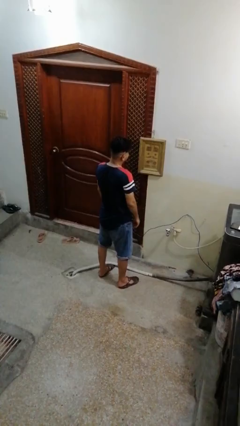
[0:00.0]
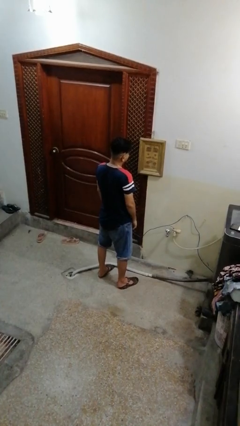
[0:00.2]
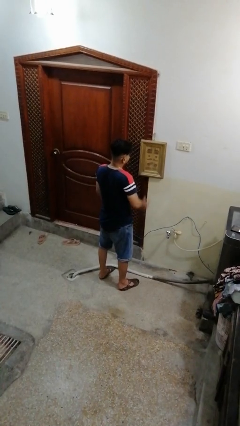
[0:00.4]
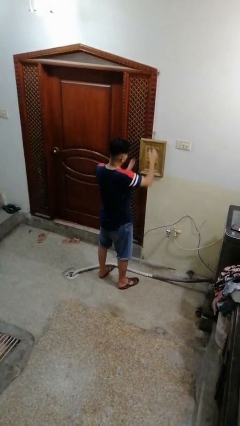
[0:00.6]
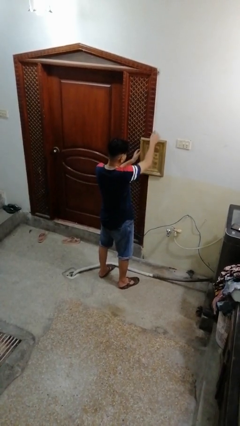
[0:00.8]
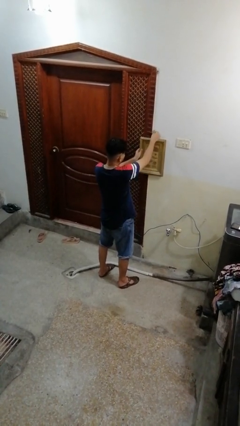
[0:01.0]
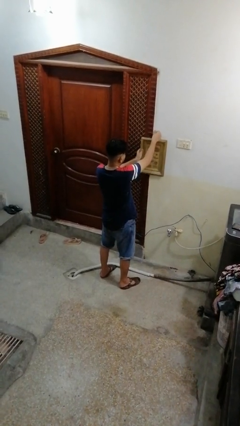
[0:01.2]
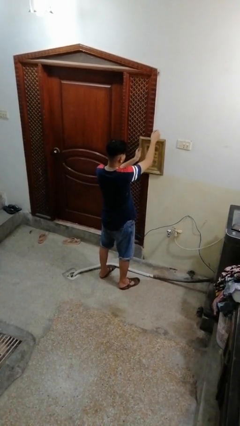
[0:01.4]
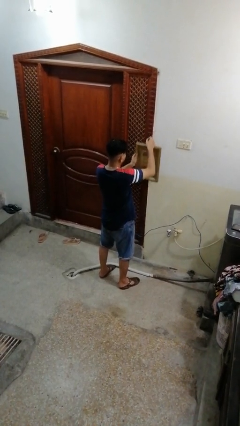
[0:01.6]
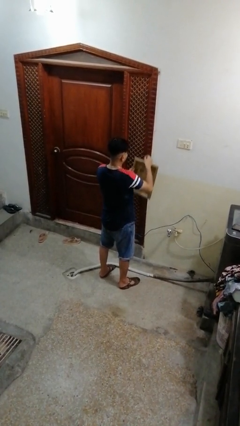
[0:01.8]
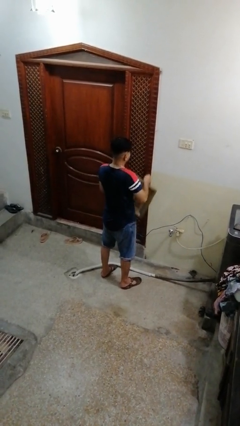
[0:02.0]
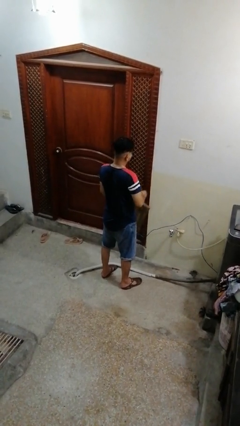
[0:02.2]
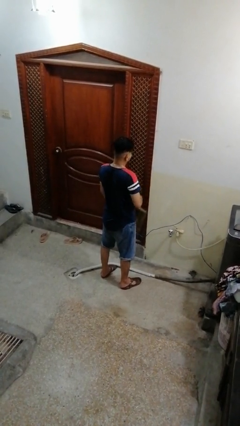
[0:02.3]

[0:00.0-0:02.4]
person takes down picture frame

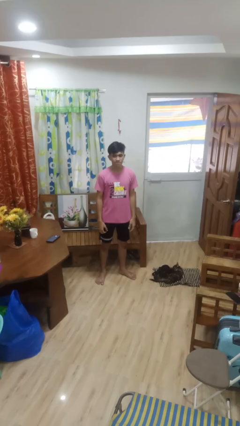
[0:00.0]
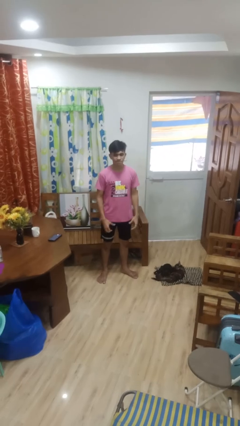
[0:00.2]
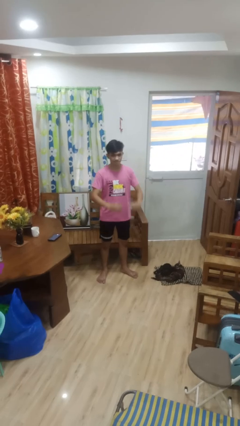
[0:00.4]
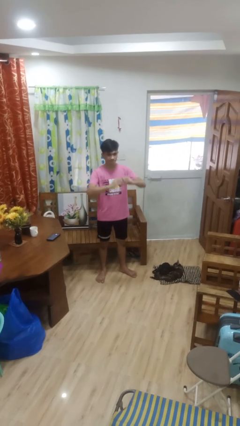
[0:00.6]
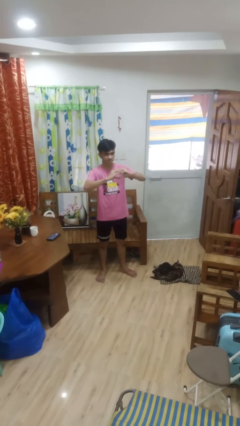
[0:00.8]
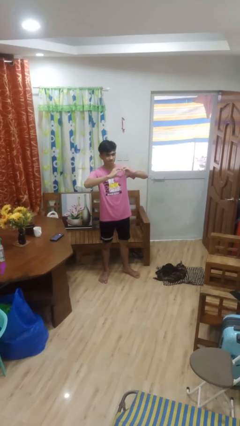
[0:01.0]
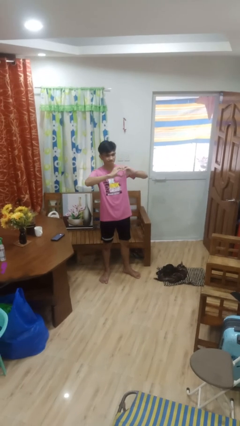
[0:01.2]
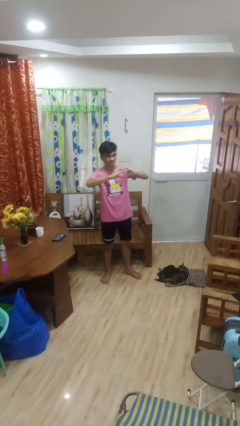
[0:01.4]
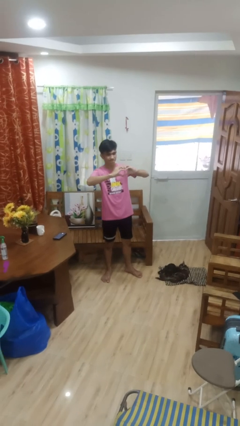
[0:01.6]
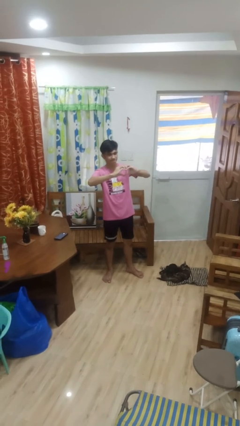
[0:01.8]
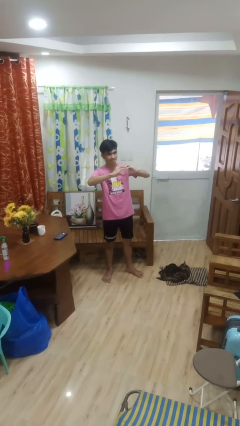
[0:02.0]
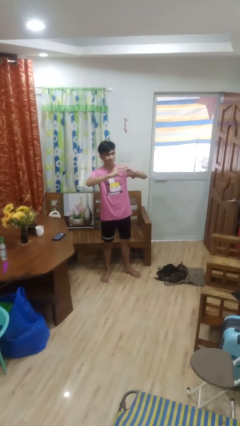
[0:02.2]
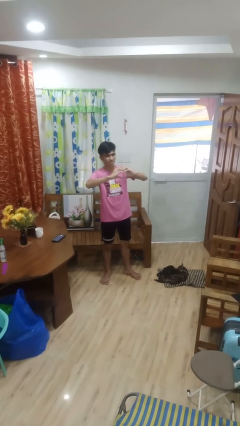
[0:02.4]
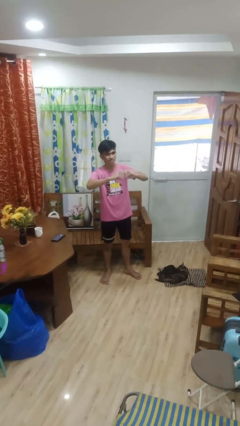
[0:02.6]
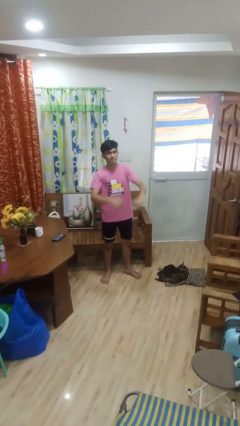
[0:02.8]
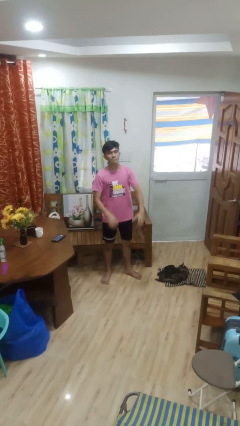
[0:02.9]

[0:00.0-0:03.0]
person gestures heart

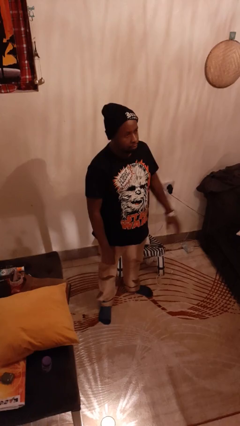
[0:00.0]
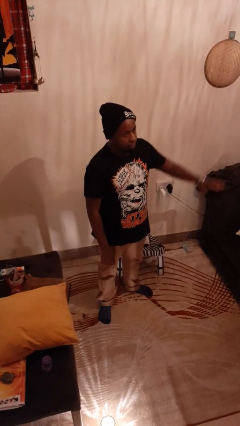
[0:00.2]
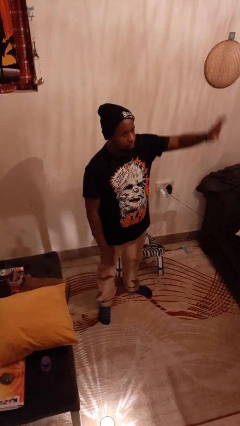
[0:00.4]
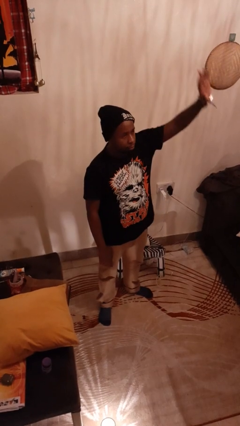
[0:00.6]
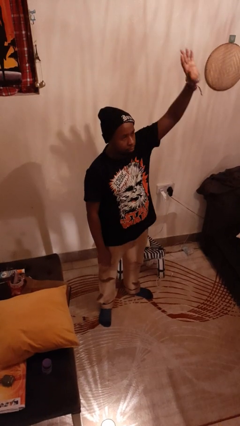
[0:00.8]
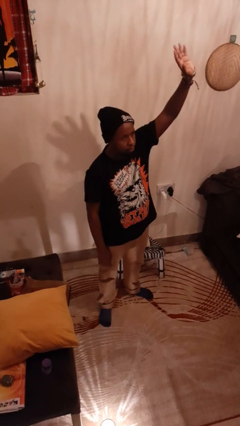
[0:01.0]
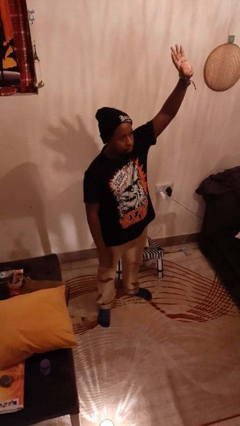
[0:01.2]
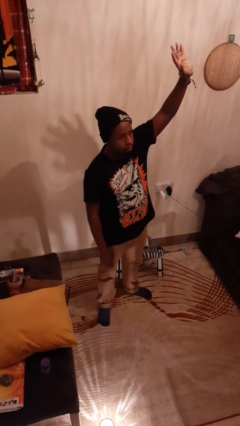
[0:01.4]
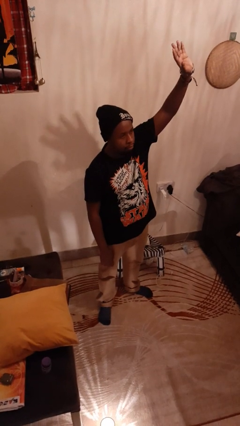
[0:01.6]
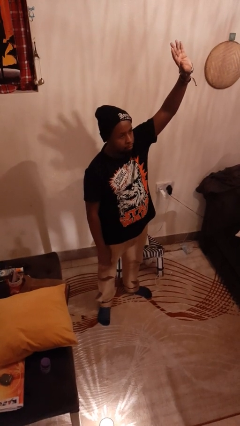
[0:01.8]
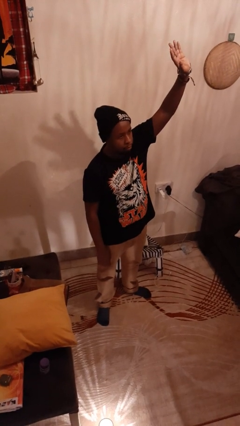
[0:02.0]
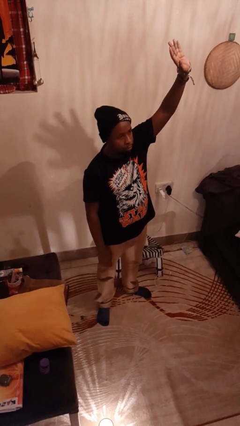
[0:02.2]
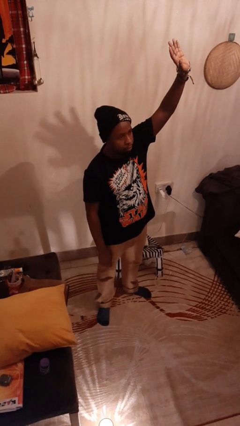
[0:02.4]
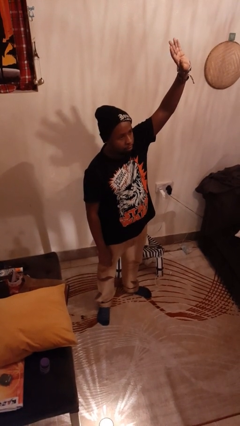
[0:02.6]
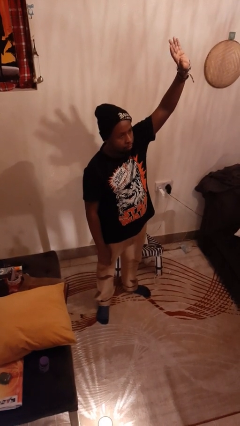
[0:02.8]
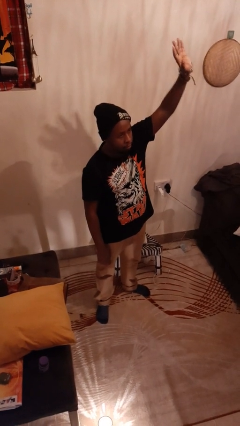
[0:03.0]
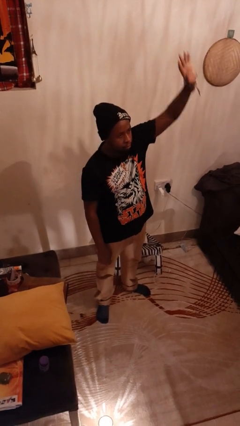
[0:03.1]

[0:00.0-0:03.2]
person gestures raise hand

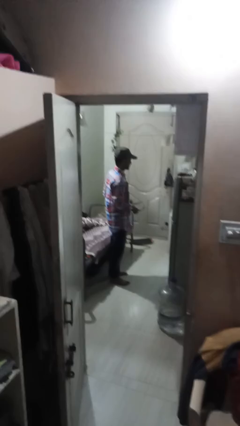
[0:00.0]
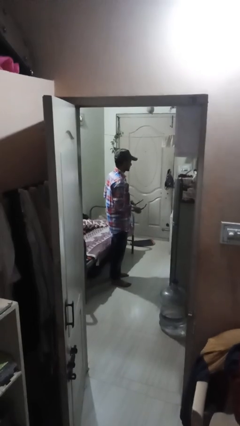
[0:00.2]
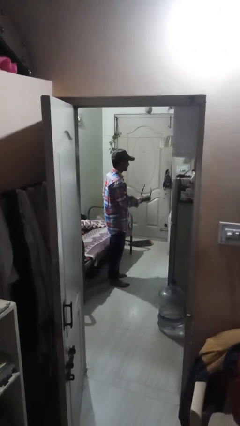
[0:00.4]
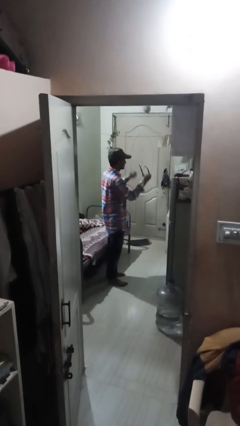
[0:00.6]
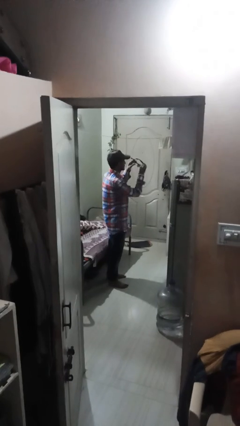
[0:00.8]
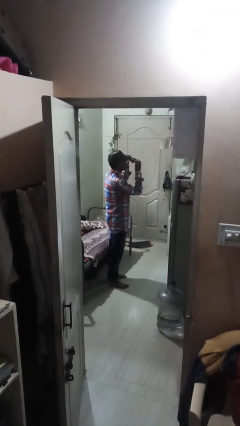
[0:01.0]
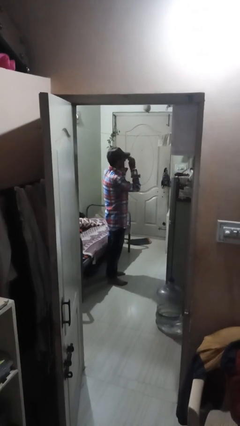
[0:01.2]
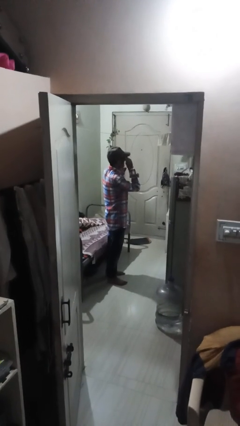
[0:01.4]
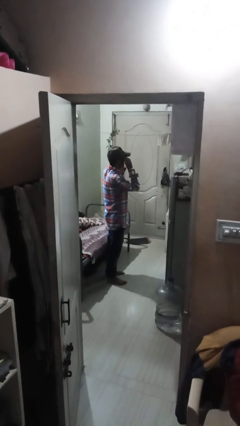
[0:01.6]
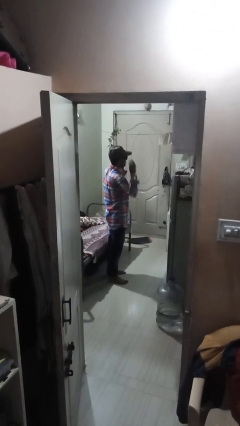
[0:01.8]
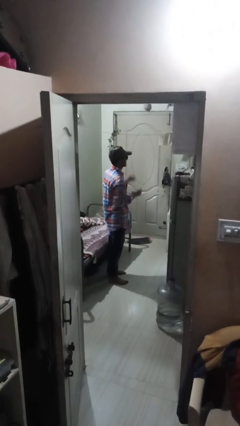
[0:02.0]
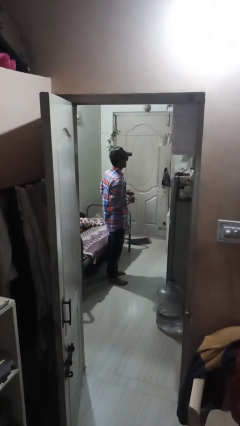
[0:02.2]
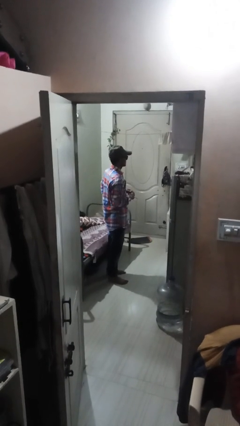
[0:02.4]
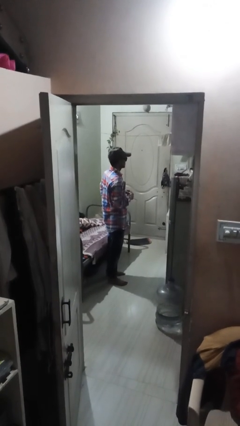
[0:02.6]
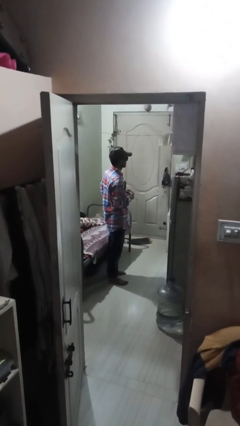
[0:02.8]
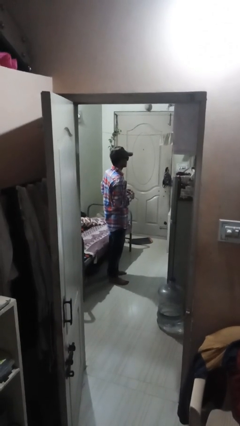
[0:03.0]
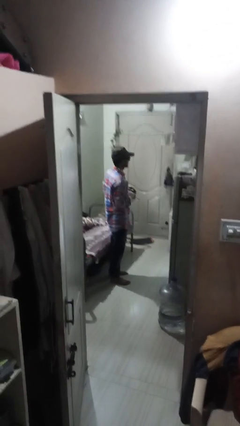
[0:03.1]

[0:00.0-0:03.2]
person puts on sunglasses

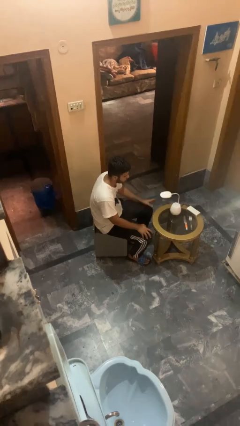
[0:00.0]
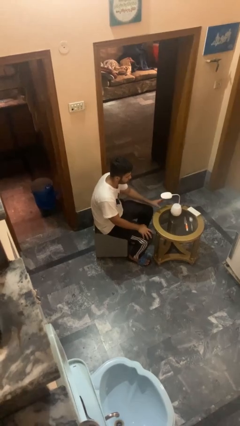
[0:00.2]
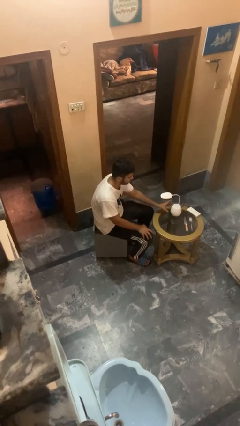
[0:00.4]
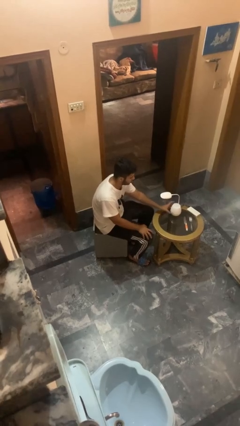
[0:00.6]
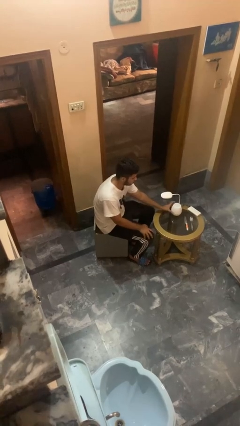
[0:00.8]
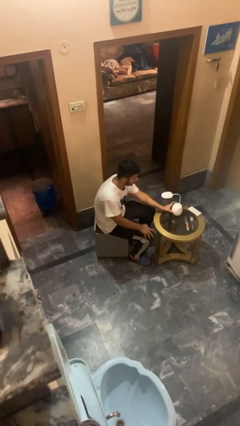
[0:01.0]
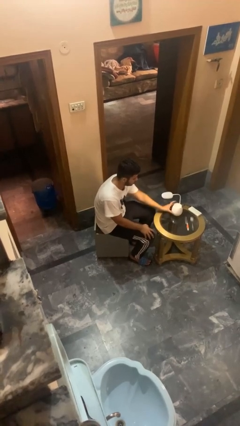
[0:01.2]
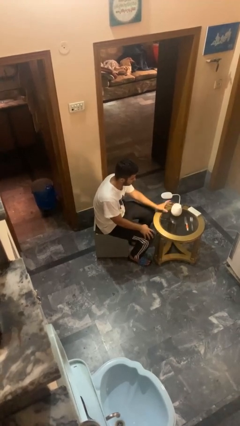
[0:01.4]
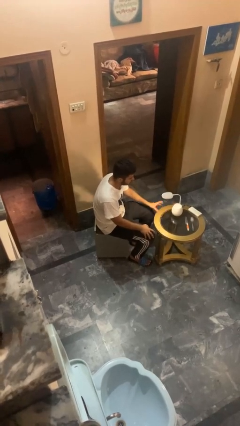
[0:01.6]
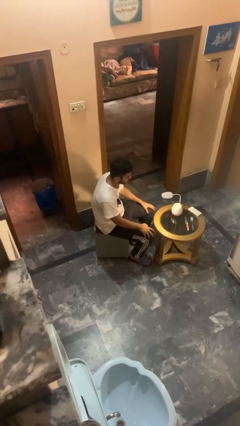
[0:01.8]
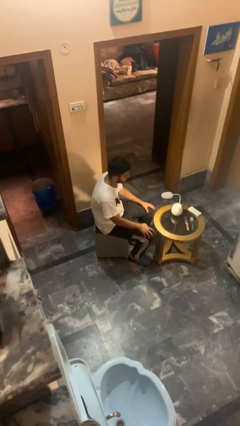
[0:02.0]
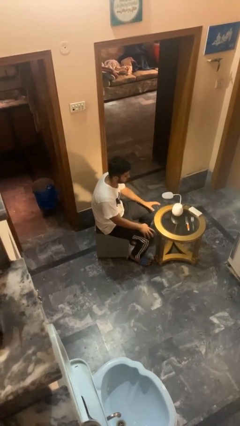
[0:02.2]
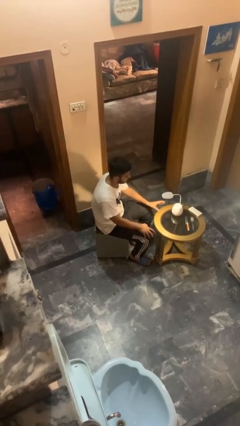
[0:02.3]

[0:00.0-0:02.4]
person turns on lamp

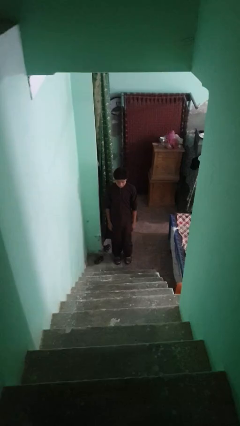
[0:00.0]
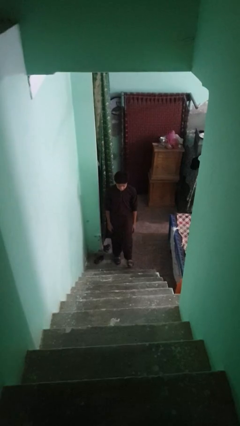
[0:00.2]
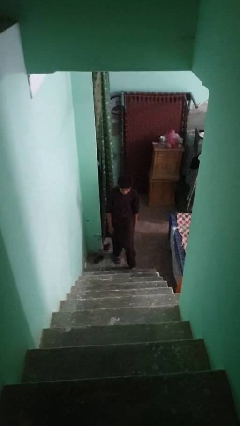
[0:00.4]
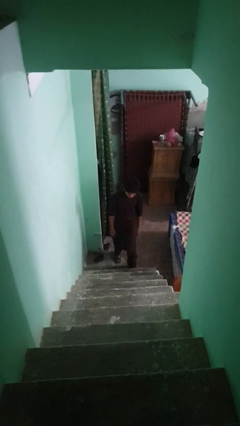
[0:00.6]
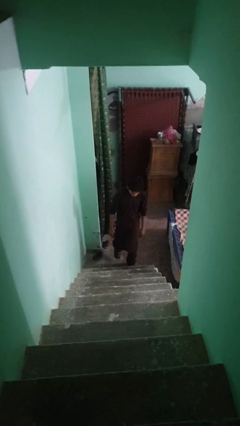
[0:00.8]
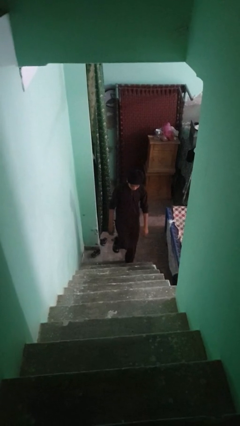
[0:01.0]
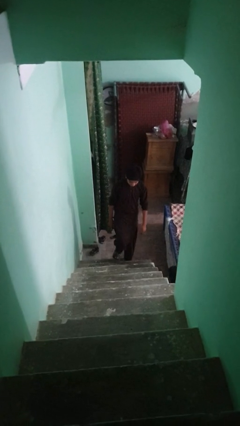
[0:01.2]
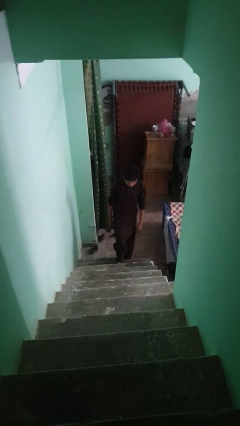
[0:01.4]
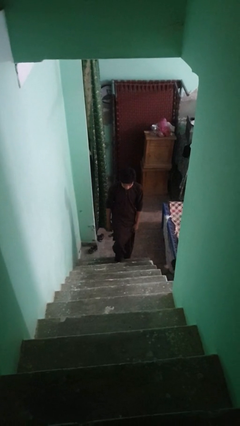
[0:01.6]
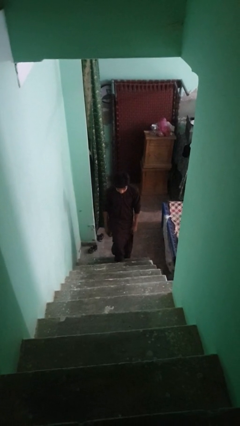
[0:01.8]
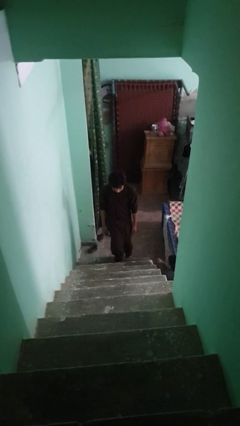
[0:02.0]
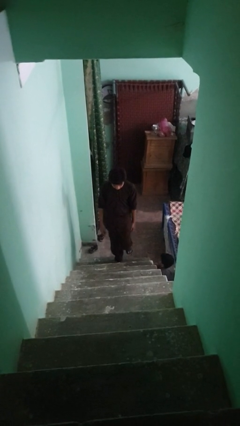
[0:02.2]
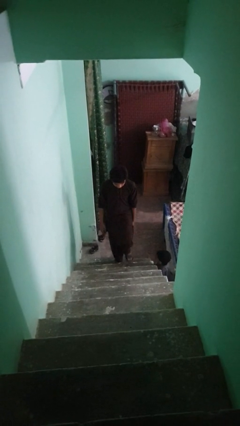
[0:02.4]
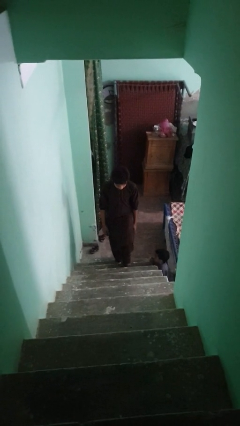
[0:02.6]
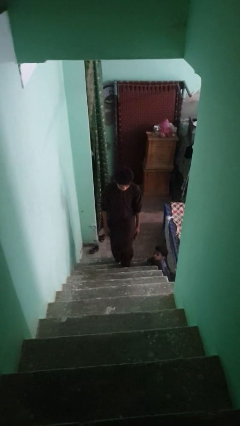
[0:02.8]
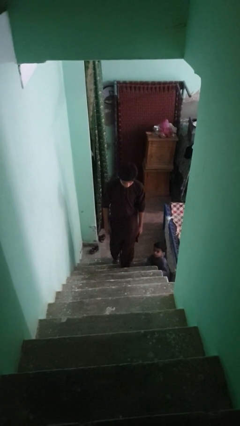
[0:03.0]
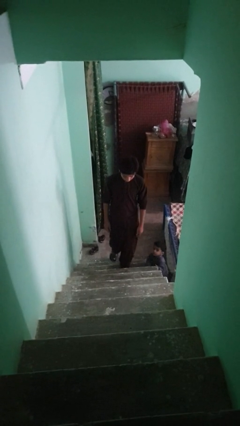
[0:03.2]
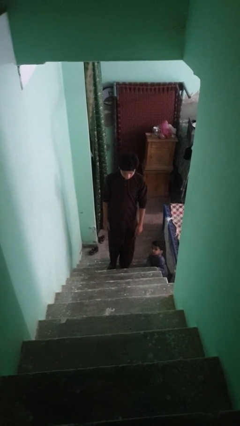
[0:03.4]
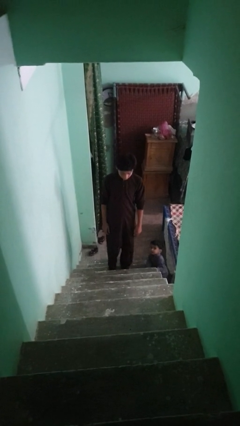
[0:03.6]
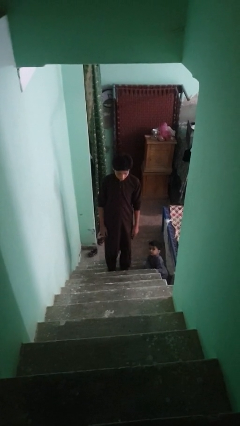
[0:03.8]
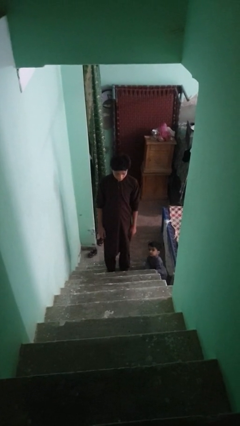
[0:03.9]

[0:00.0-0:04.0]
person climbs up stairs
